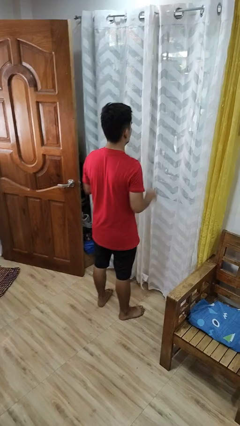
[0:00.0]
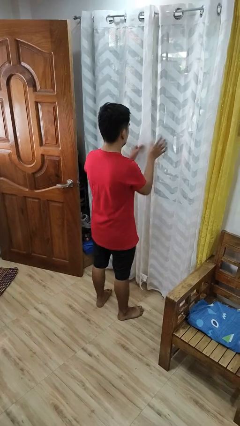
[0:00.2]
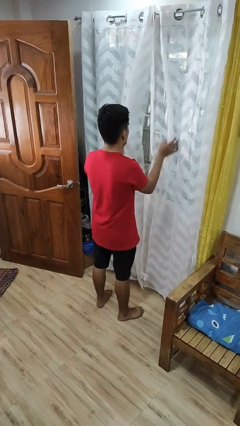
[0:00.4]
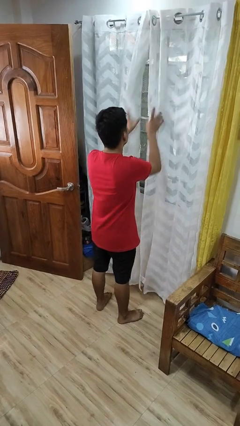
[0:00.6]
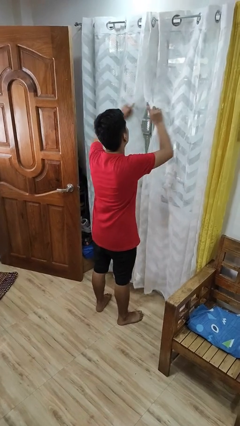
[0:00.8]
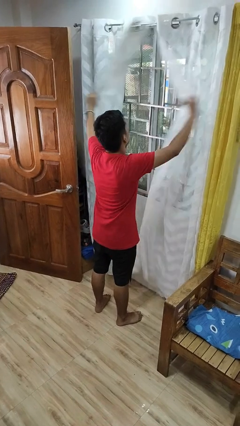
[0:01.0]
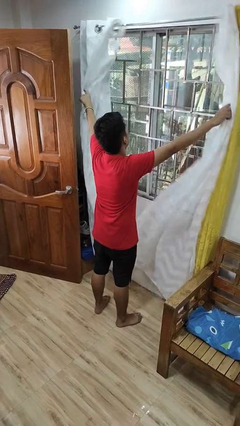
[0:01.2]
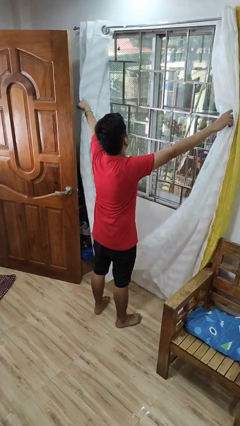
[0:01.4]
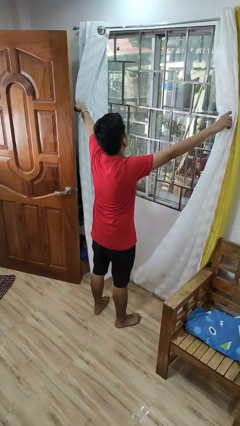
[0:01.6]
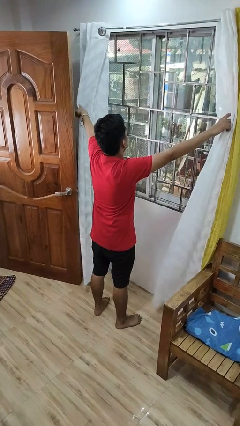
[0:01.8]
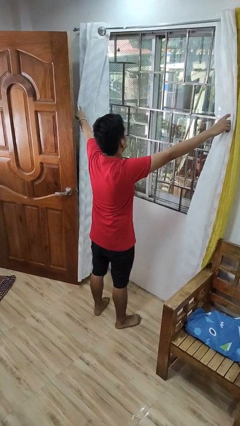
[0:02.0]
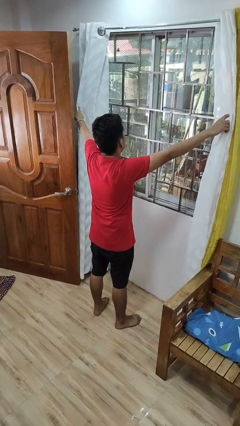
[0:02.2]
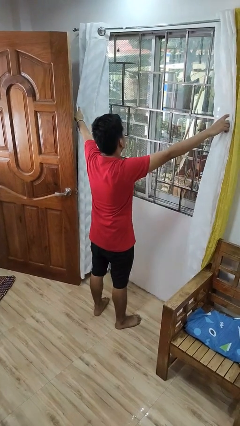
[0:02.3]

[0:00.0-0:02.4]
person opens curtains

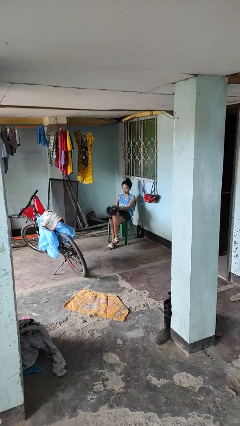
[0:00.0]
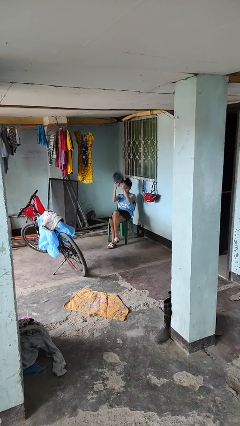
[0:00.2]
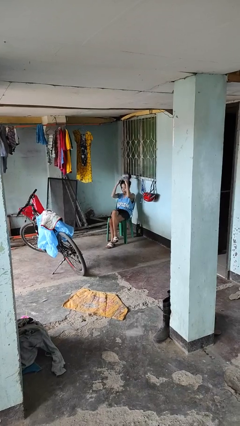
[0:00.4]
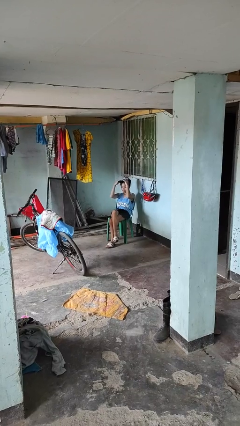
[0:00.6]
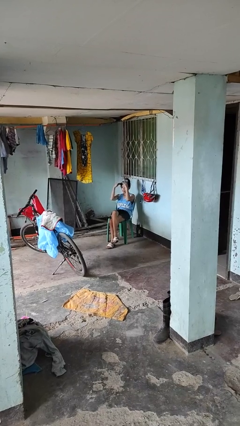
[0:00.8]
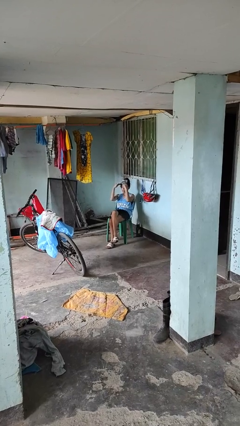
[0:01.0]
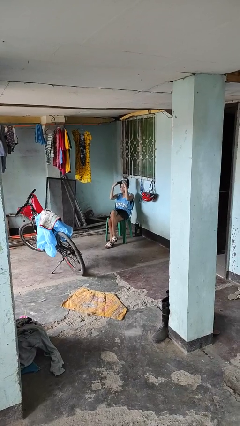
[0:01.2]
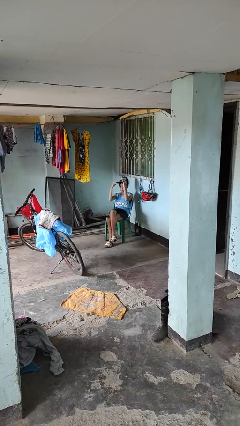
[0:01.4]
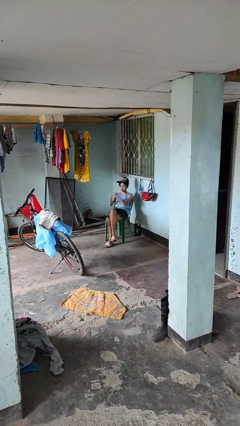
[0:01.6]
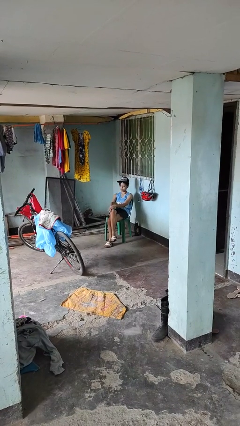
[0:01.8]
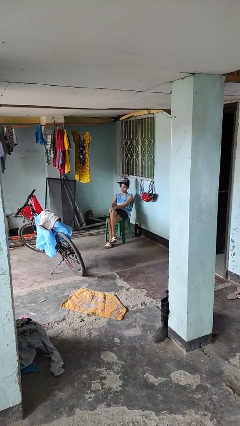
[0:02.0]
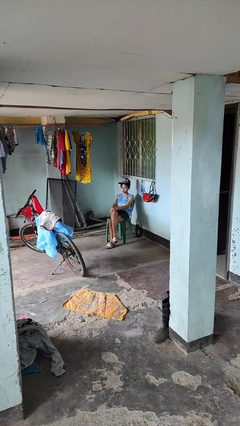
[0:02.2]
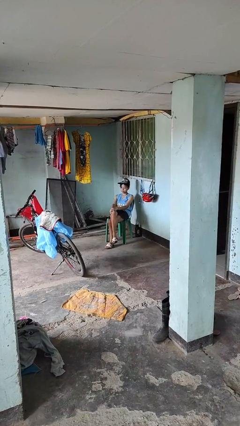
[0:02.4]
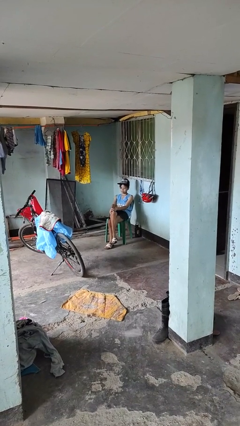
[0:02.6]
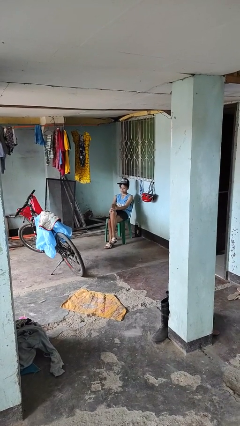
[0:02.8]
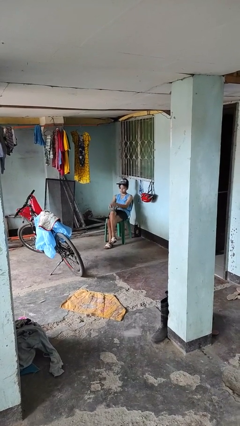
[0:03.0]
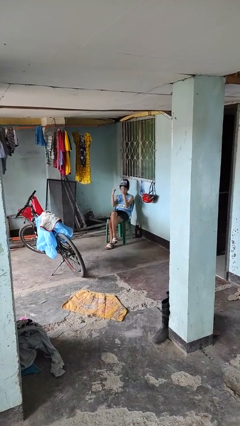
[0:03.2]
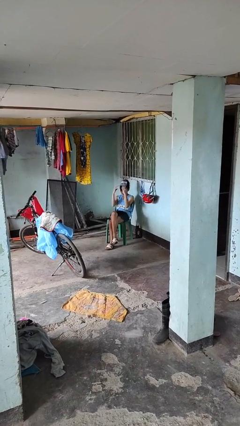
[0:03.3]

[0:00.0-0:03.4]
person puts on hat

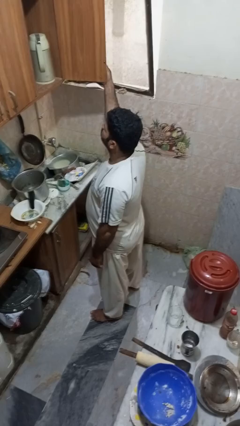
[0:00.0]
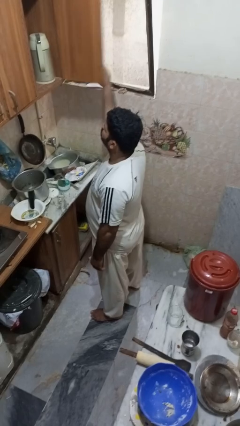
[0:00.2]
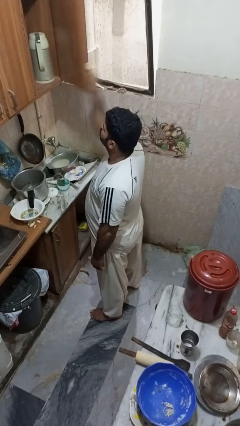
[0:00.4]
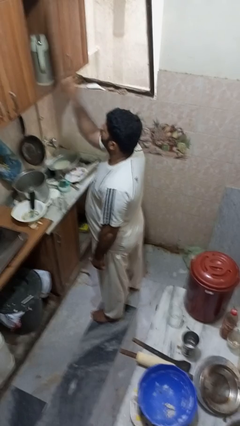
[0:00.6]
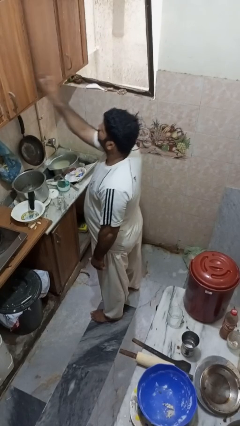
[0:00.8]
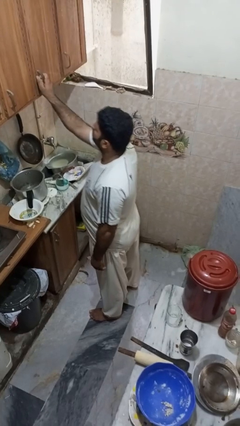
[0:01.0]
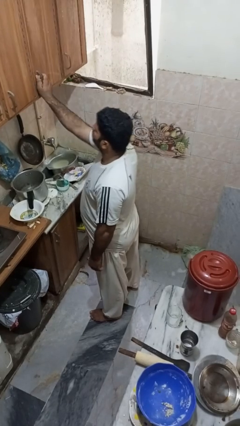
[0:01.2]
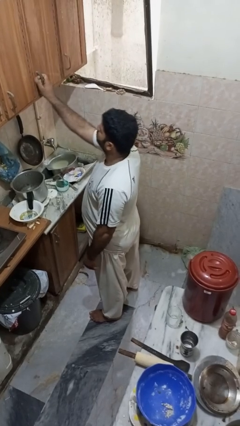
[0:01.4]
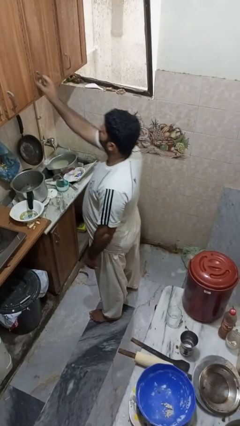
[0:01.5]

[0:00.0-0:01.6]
person closes cabinet

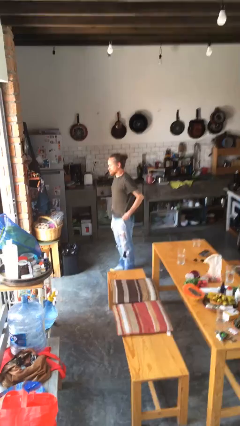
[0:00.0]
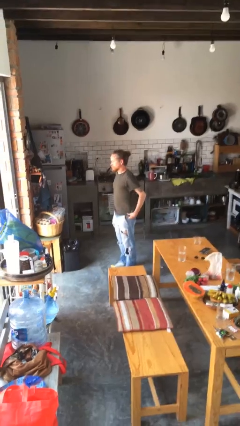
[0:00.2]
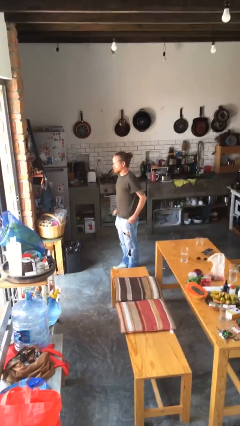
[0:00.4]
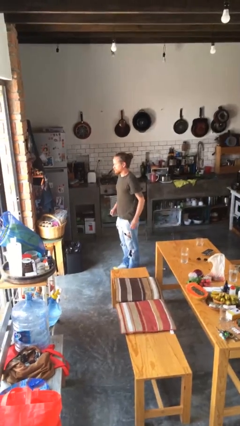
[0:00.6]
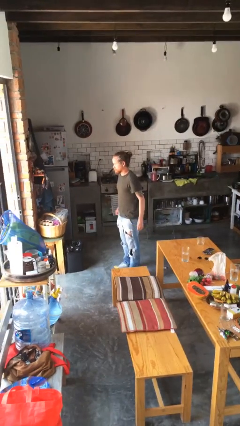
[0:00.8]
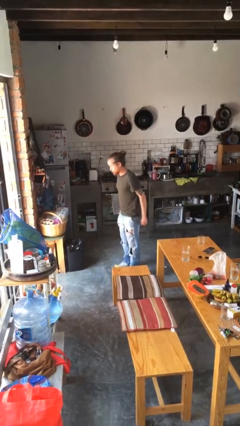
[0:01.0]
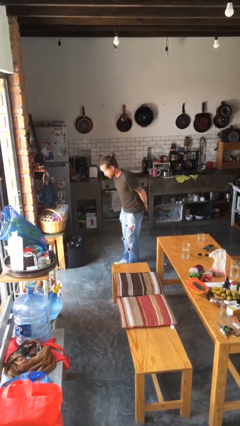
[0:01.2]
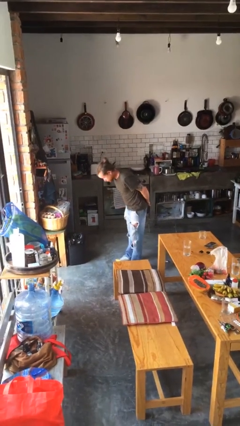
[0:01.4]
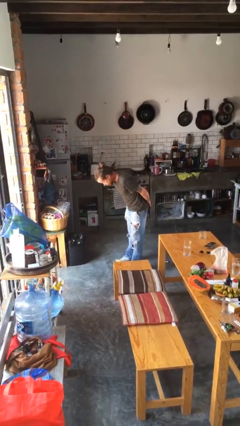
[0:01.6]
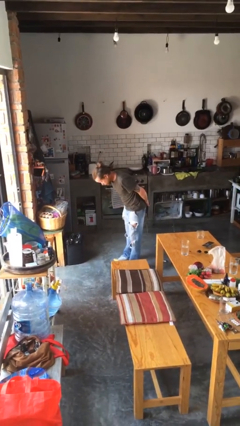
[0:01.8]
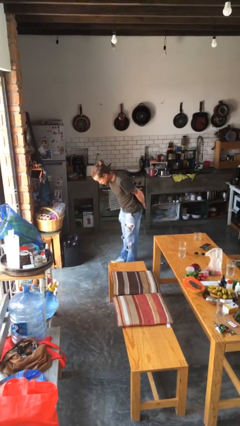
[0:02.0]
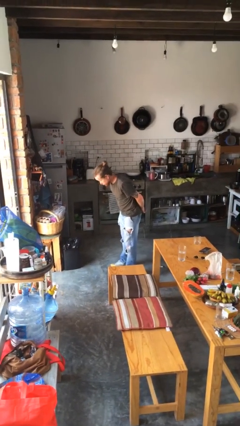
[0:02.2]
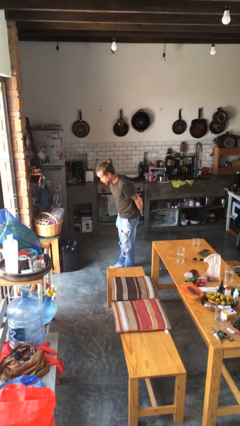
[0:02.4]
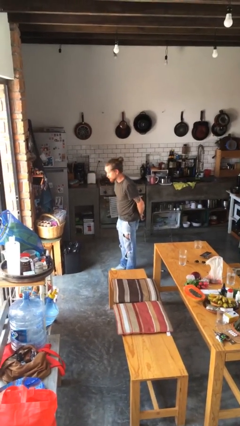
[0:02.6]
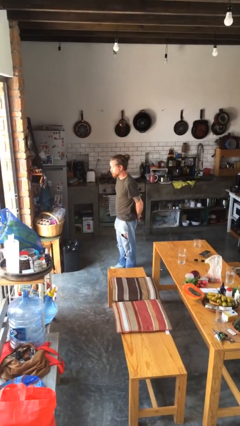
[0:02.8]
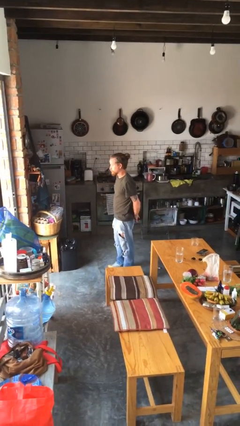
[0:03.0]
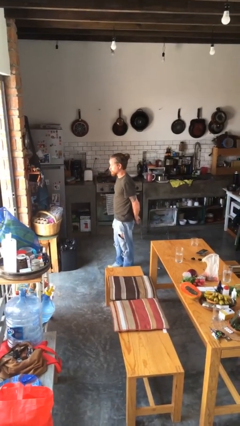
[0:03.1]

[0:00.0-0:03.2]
person bows

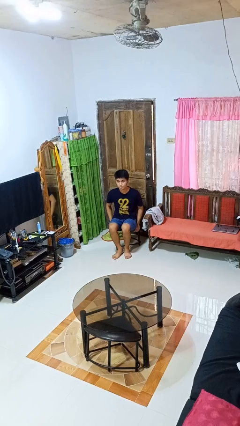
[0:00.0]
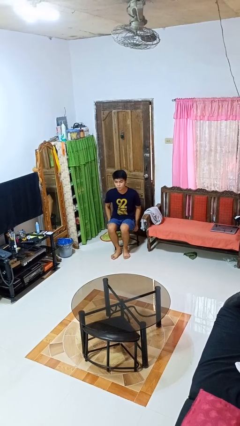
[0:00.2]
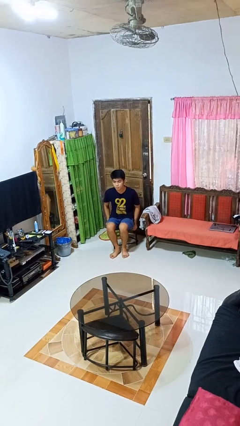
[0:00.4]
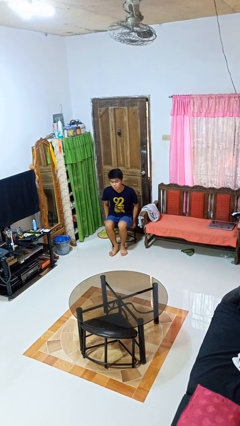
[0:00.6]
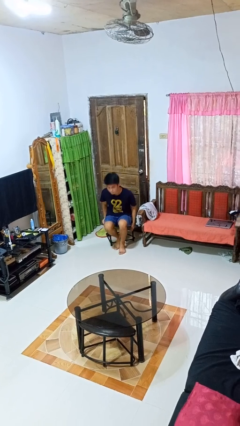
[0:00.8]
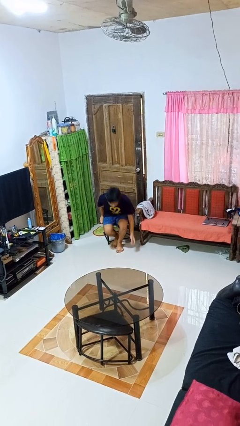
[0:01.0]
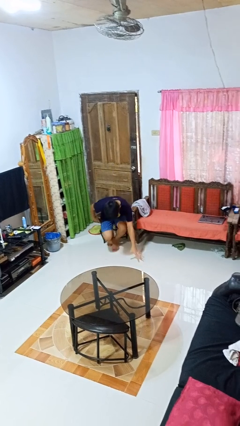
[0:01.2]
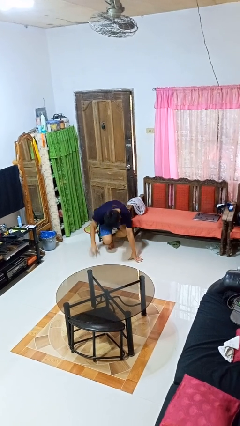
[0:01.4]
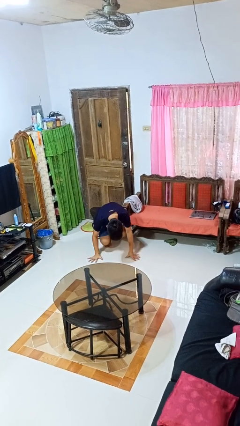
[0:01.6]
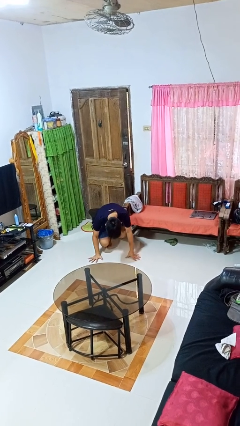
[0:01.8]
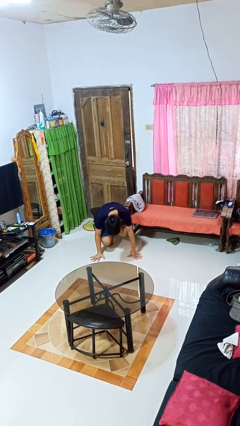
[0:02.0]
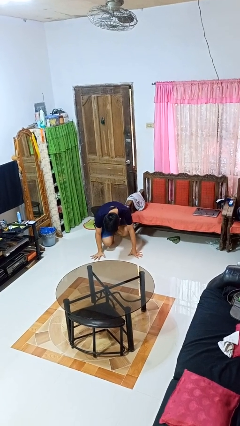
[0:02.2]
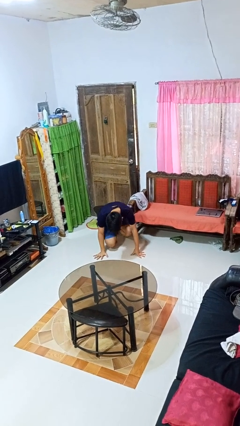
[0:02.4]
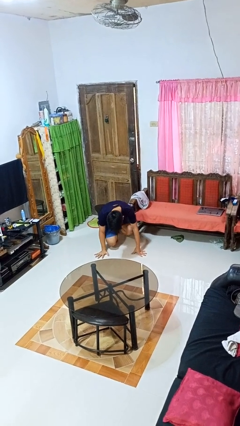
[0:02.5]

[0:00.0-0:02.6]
person falls from chair

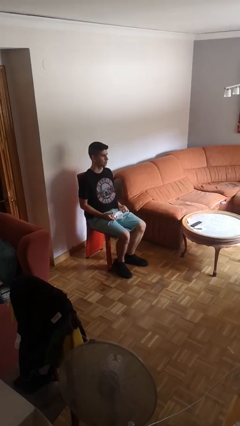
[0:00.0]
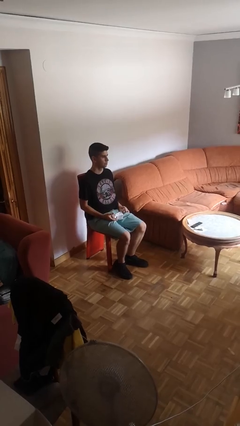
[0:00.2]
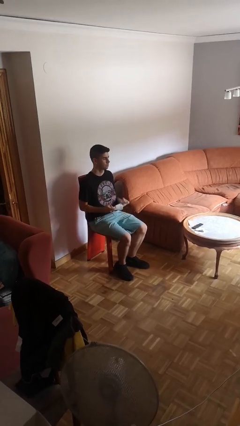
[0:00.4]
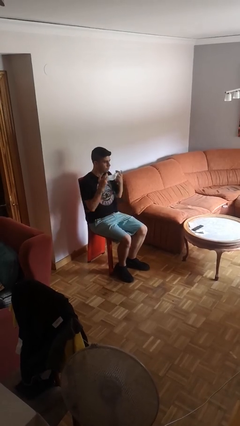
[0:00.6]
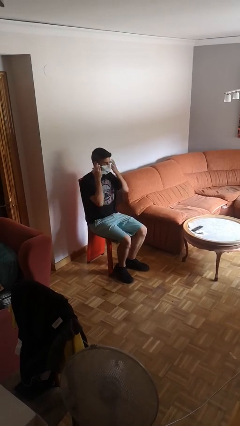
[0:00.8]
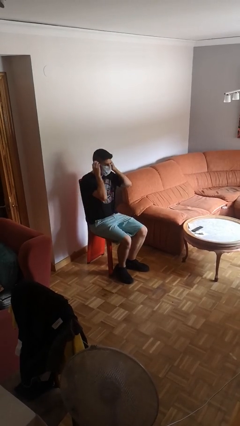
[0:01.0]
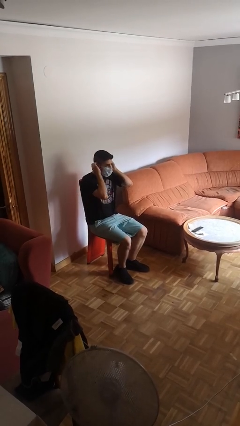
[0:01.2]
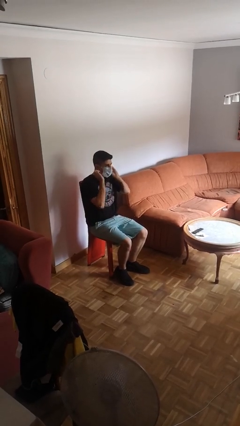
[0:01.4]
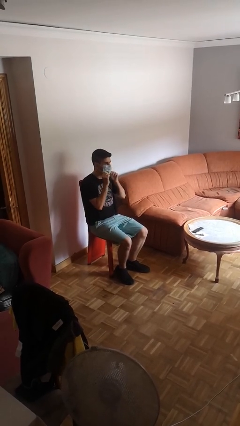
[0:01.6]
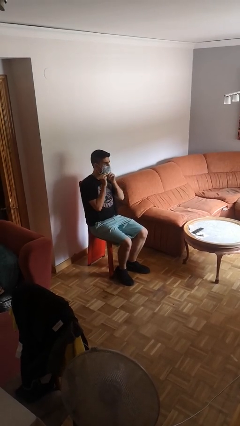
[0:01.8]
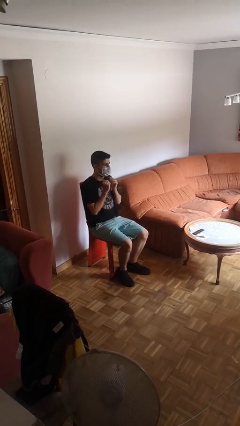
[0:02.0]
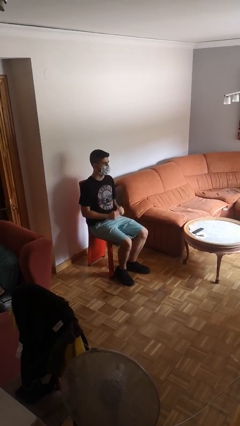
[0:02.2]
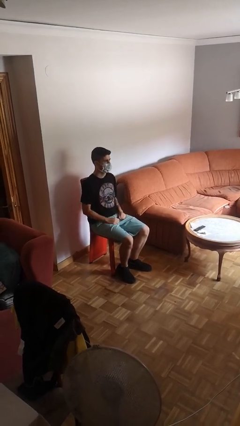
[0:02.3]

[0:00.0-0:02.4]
person puts on facemask

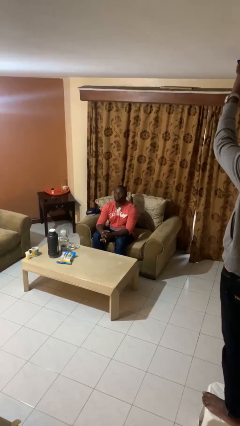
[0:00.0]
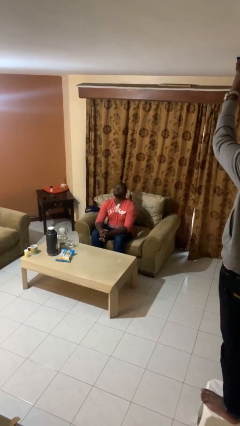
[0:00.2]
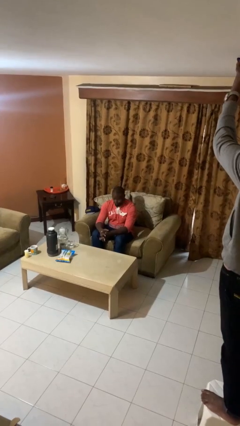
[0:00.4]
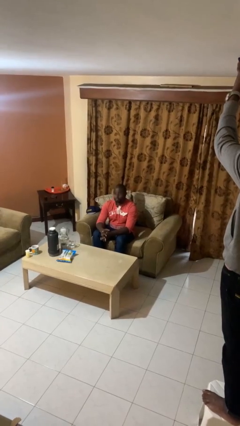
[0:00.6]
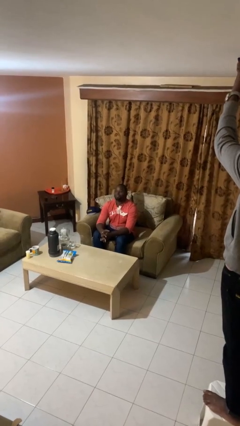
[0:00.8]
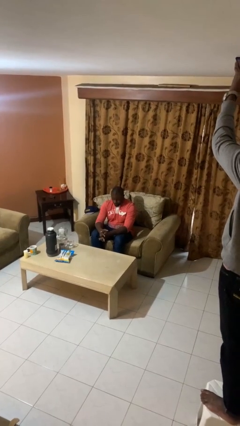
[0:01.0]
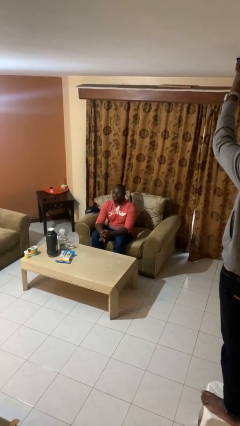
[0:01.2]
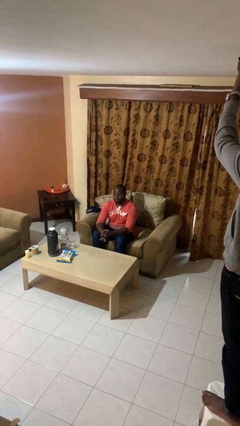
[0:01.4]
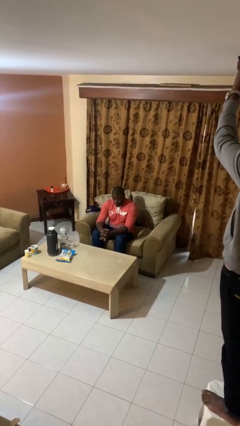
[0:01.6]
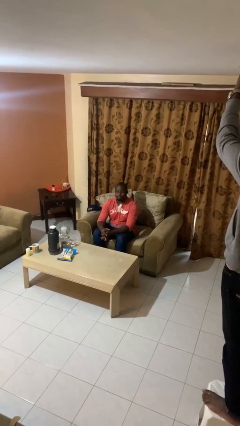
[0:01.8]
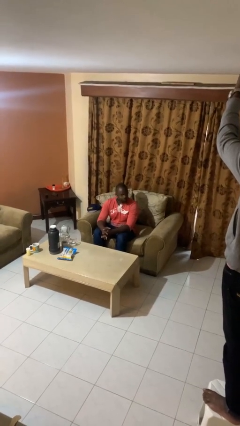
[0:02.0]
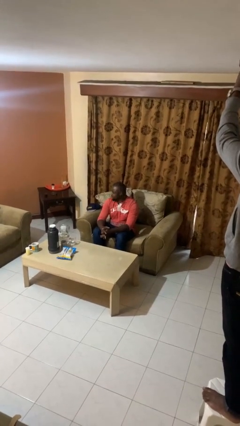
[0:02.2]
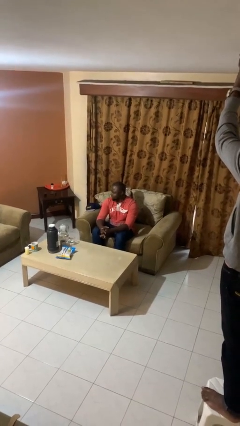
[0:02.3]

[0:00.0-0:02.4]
person nods head
